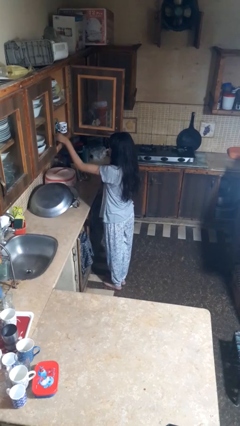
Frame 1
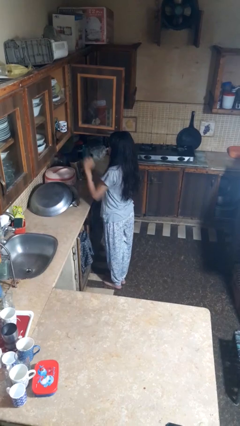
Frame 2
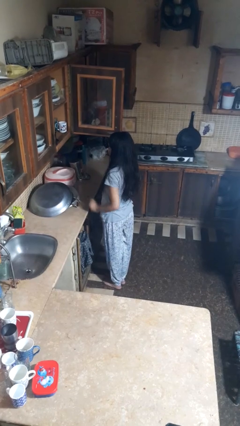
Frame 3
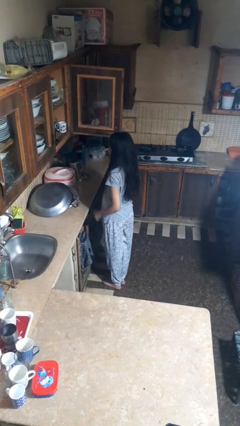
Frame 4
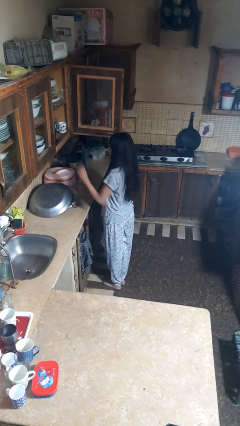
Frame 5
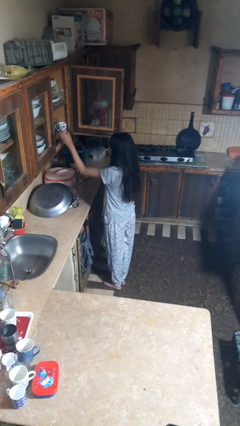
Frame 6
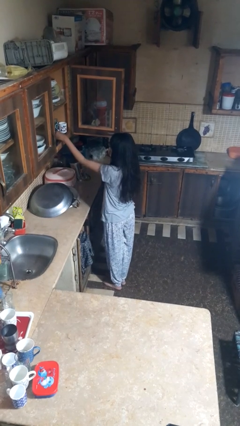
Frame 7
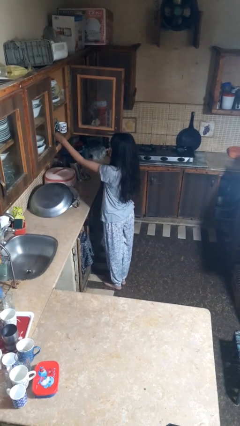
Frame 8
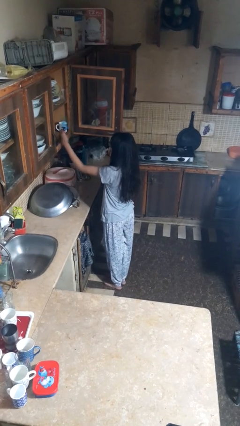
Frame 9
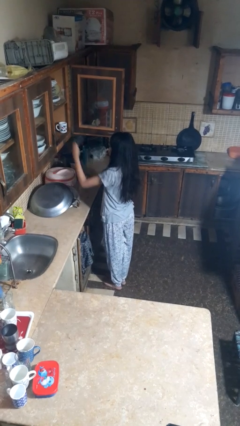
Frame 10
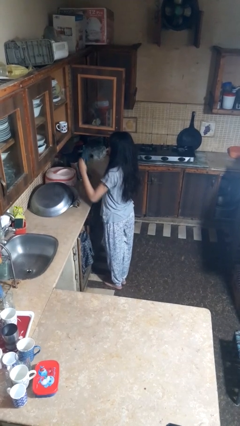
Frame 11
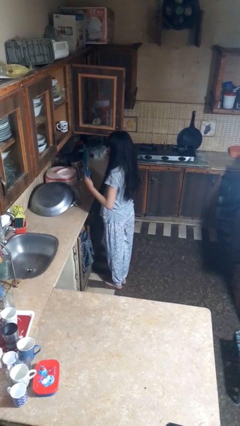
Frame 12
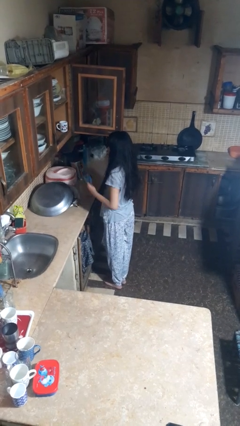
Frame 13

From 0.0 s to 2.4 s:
person takes object from cabinet

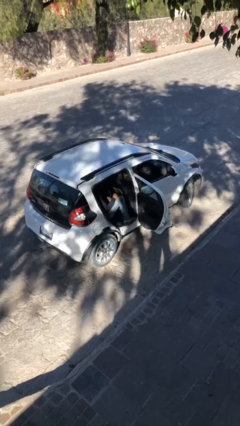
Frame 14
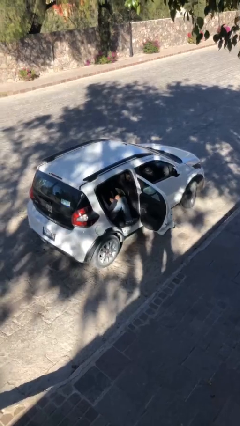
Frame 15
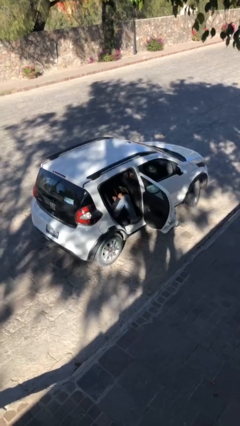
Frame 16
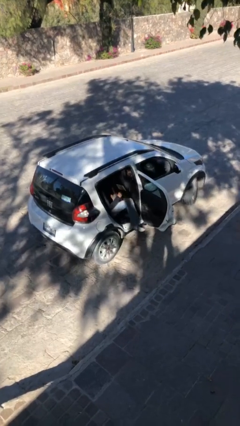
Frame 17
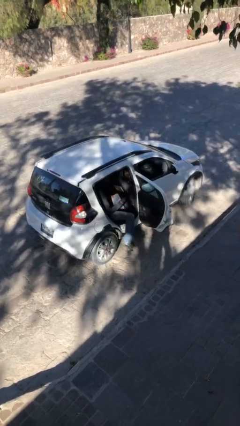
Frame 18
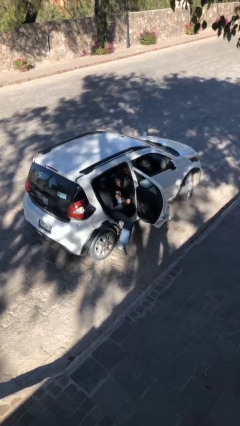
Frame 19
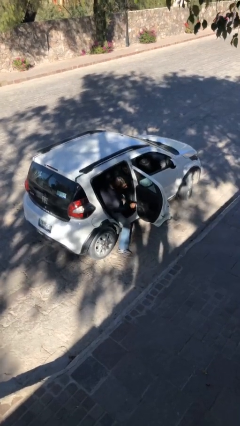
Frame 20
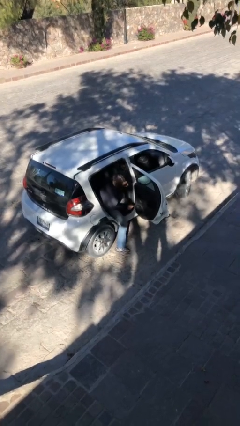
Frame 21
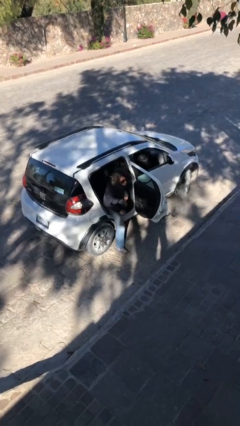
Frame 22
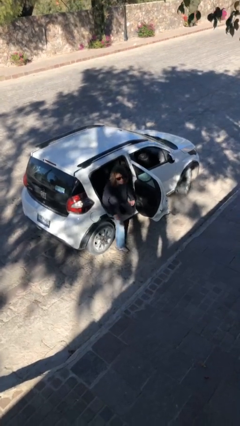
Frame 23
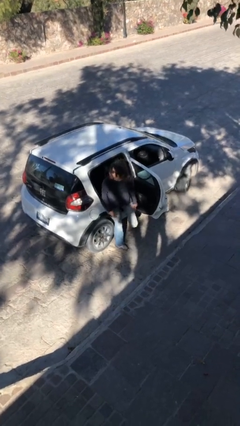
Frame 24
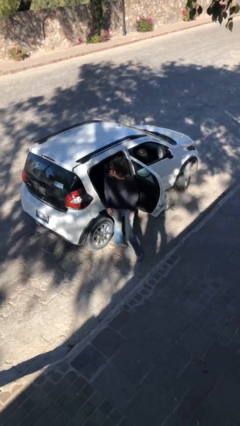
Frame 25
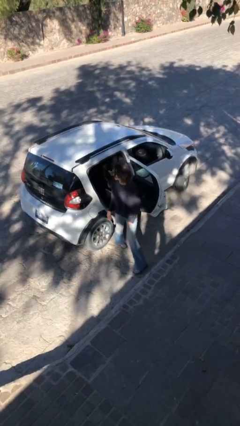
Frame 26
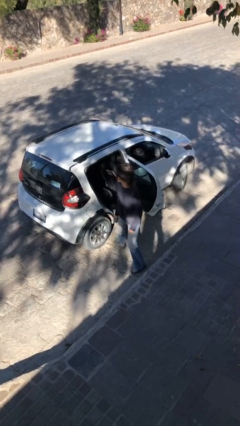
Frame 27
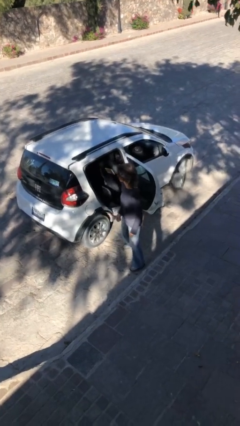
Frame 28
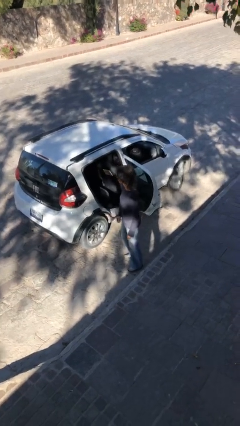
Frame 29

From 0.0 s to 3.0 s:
person exits car

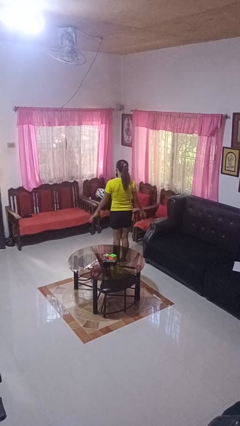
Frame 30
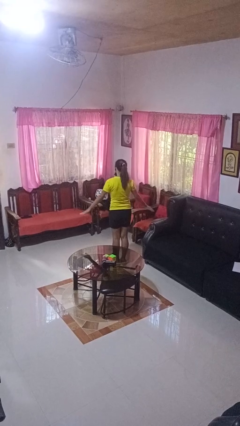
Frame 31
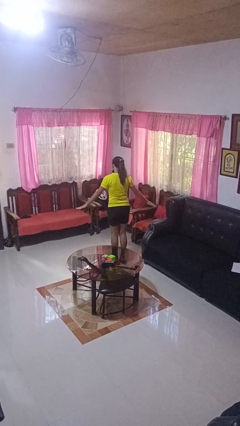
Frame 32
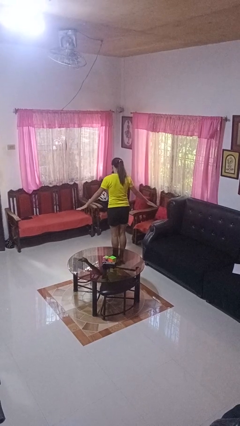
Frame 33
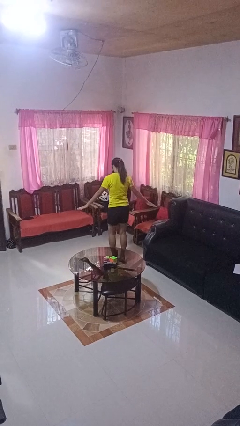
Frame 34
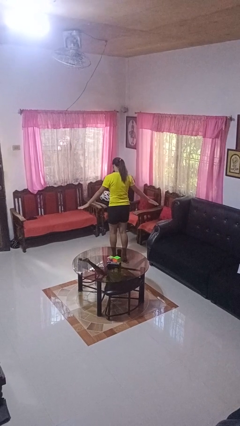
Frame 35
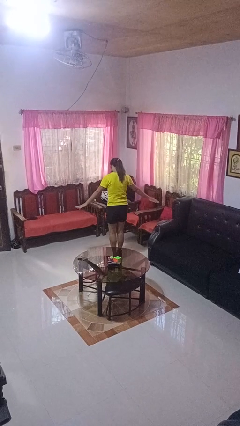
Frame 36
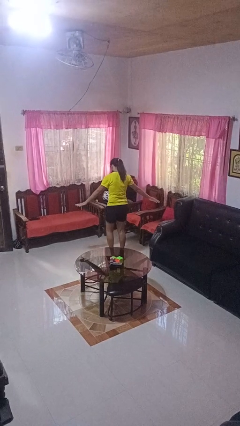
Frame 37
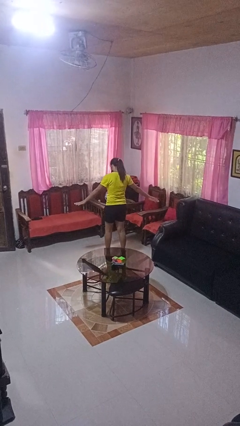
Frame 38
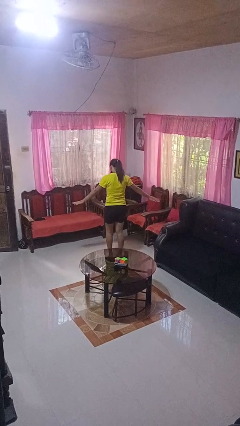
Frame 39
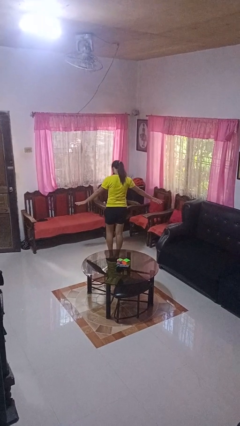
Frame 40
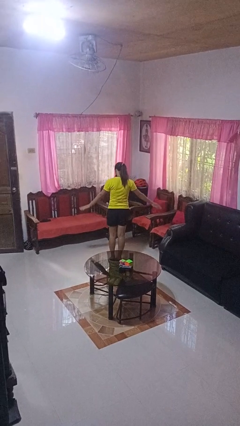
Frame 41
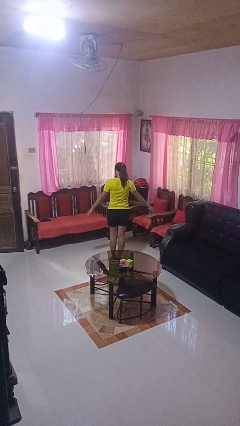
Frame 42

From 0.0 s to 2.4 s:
person walks tiptoe

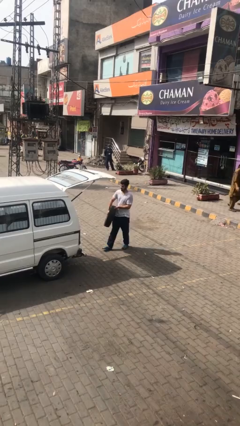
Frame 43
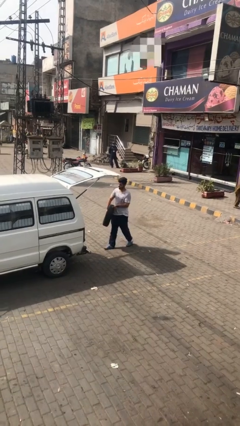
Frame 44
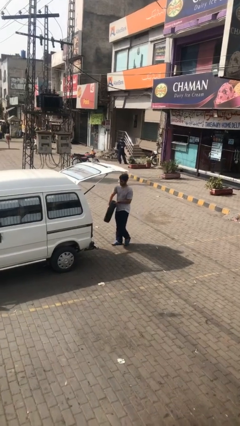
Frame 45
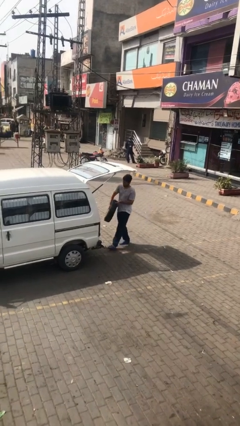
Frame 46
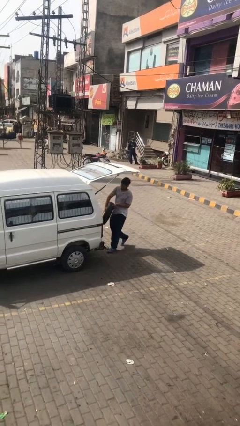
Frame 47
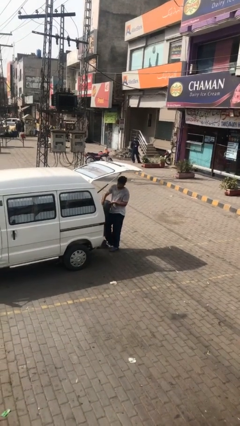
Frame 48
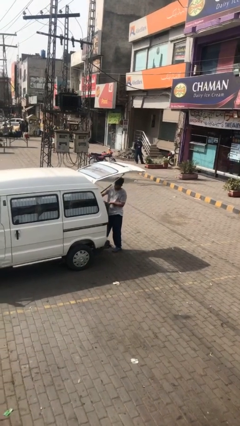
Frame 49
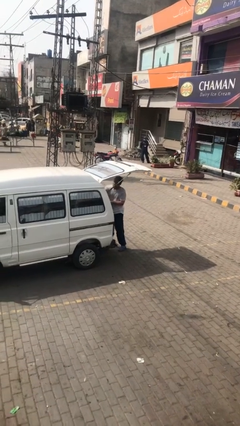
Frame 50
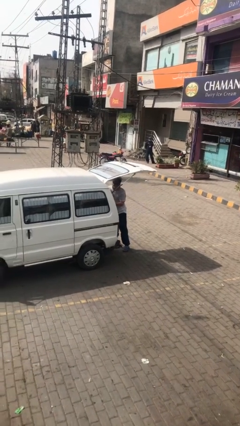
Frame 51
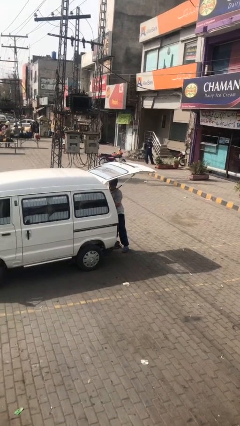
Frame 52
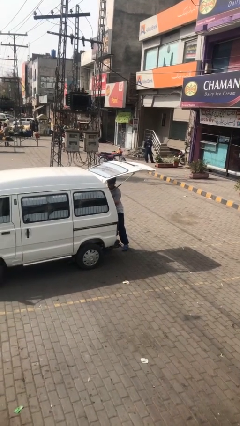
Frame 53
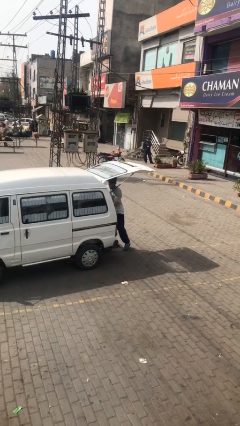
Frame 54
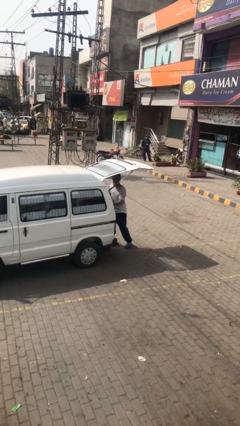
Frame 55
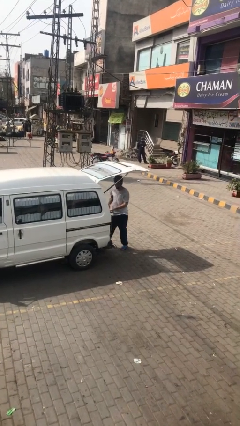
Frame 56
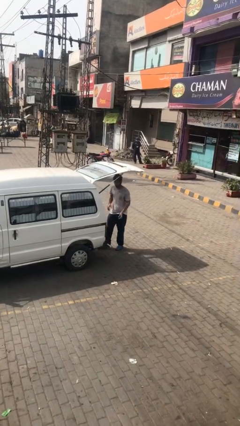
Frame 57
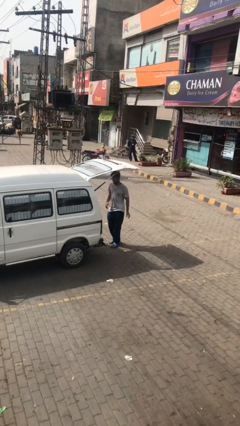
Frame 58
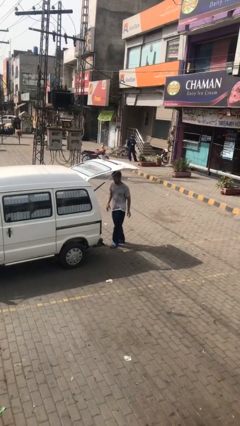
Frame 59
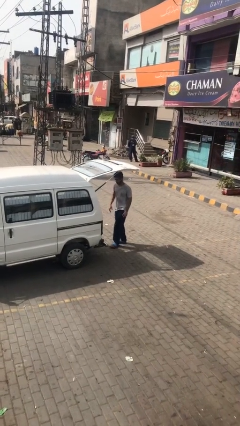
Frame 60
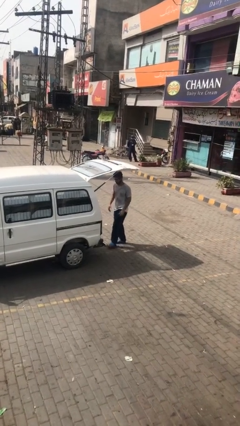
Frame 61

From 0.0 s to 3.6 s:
person loads car

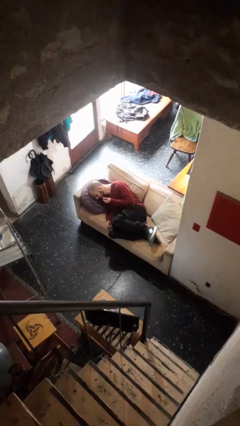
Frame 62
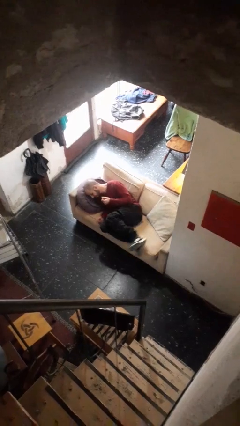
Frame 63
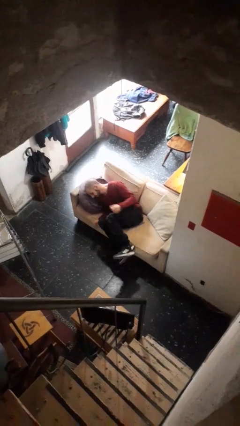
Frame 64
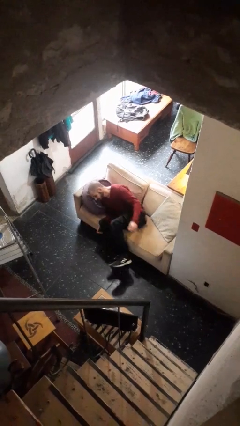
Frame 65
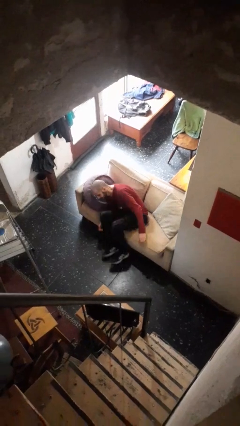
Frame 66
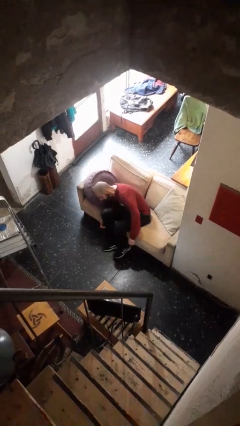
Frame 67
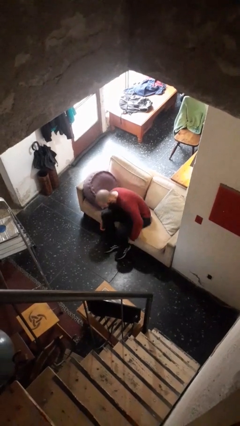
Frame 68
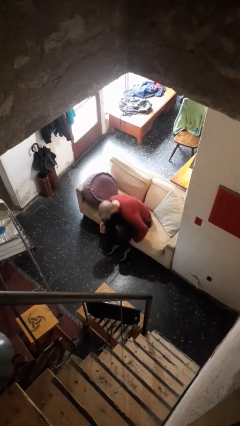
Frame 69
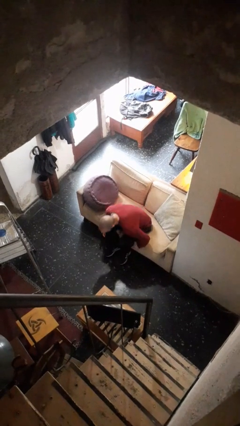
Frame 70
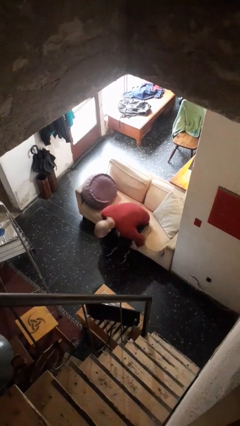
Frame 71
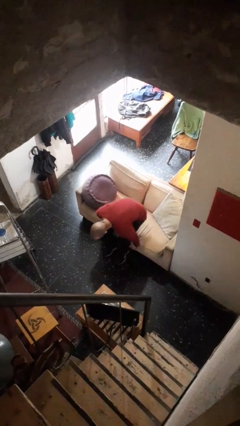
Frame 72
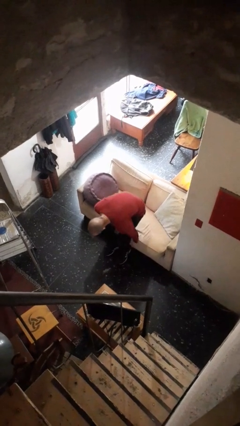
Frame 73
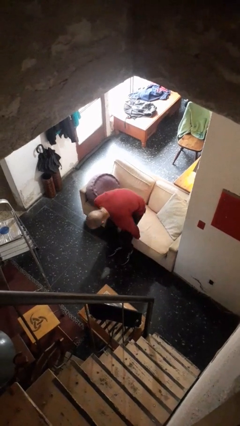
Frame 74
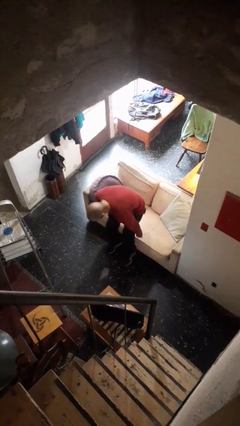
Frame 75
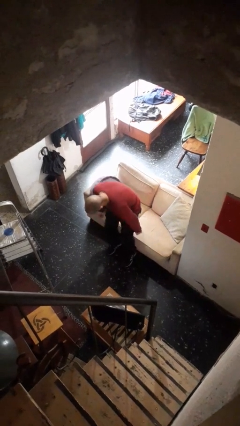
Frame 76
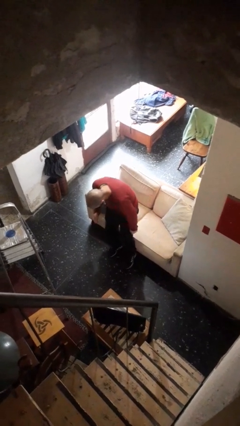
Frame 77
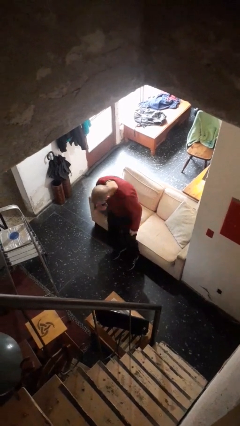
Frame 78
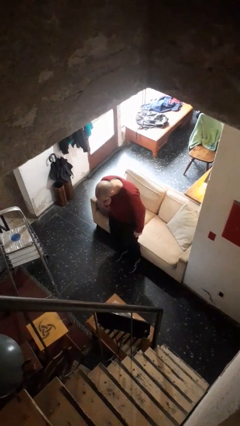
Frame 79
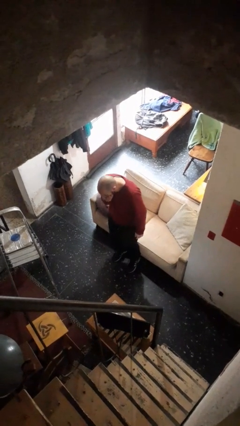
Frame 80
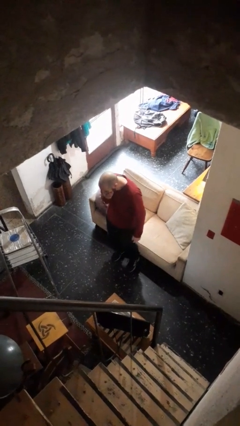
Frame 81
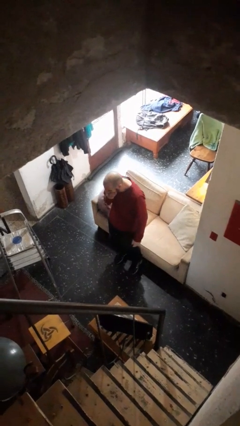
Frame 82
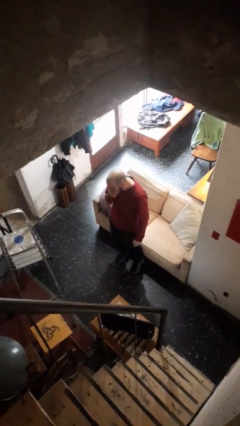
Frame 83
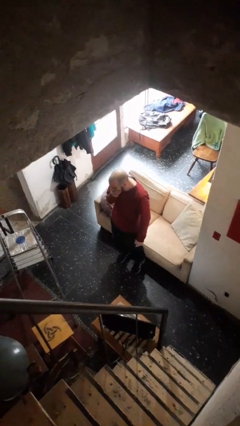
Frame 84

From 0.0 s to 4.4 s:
person stands up

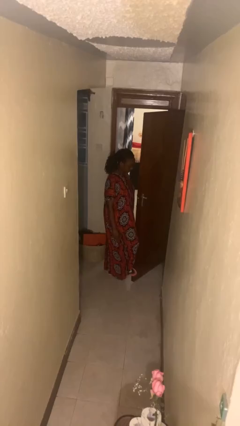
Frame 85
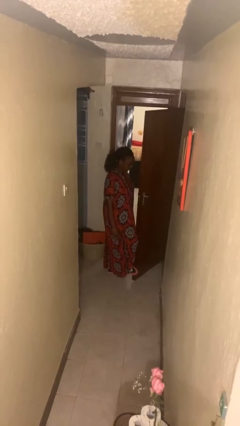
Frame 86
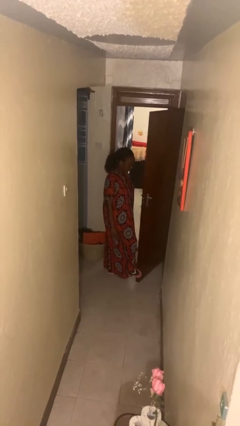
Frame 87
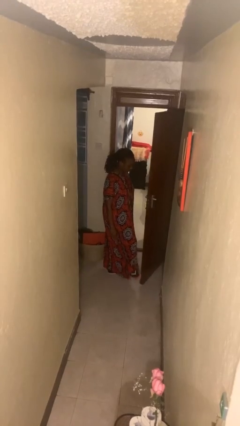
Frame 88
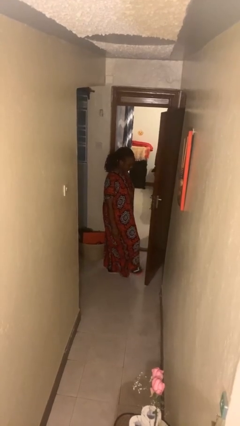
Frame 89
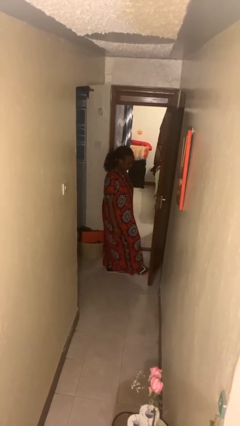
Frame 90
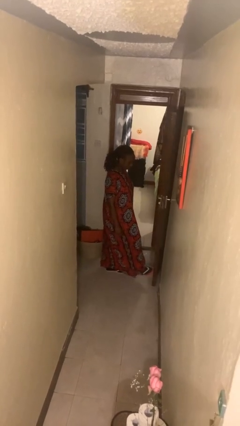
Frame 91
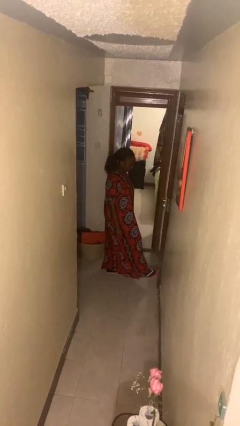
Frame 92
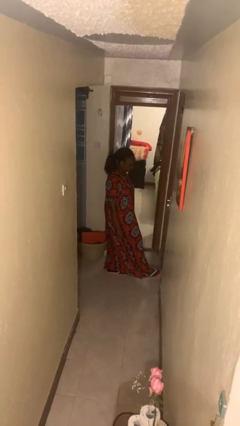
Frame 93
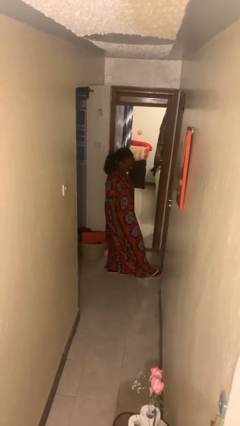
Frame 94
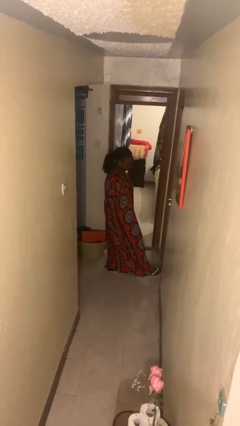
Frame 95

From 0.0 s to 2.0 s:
person closes door with foot
